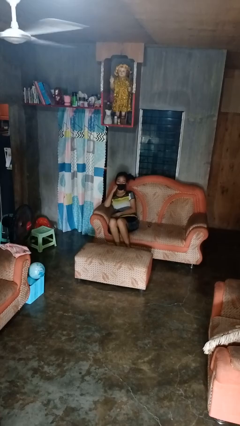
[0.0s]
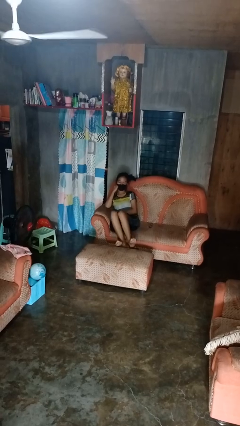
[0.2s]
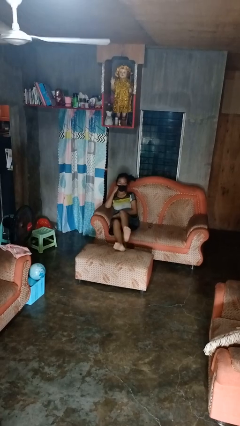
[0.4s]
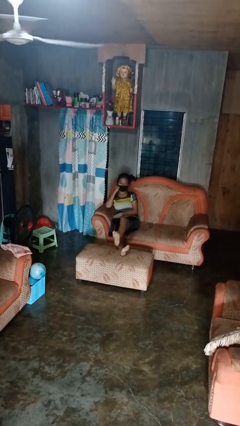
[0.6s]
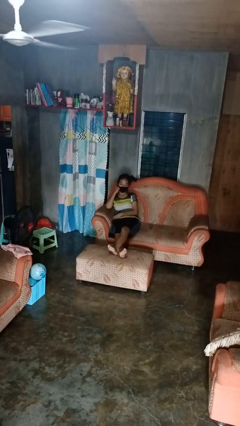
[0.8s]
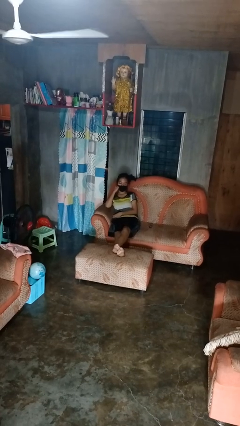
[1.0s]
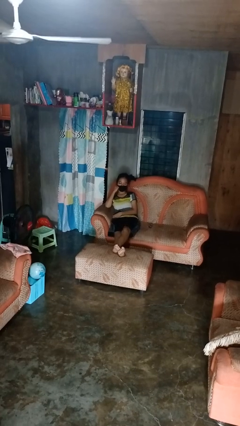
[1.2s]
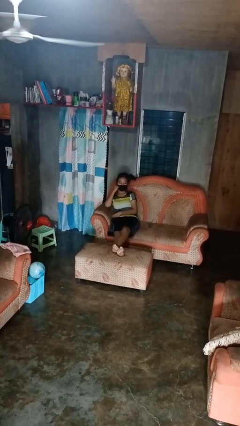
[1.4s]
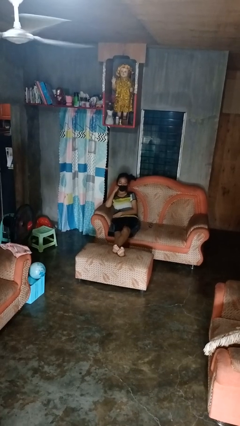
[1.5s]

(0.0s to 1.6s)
person puts feet up

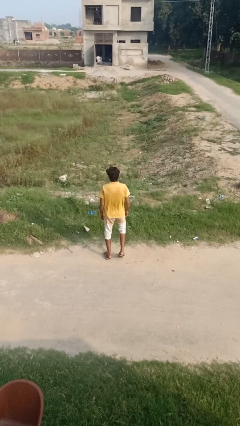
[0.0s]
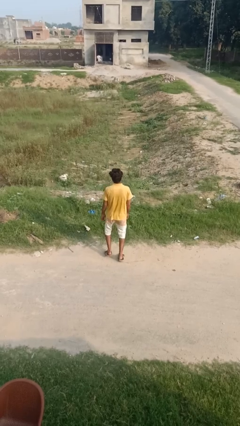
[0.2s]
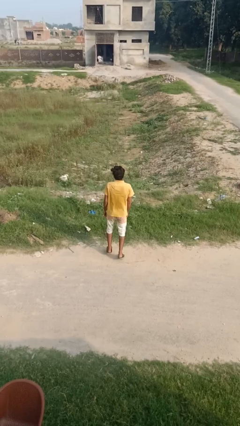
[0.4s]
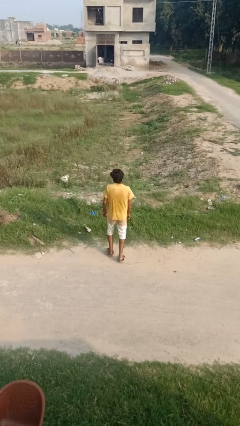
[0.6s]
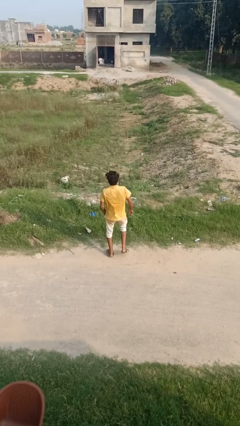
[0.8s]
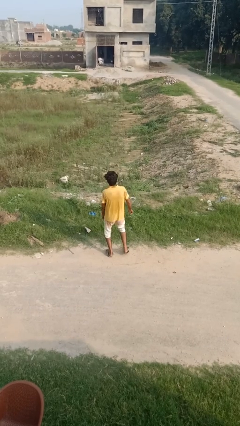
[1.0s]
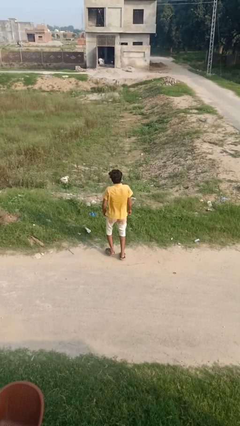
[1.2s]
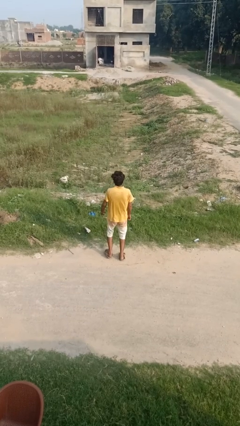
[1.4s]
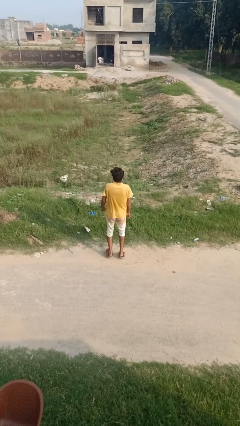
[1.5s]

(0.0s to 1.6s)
person dances in place

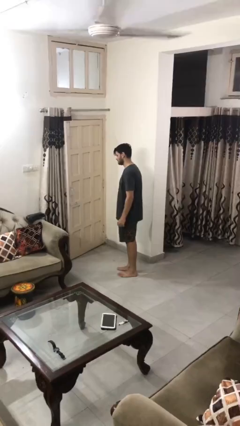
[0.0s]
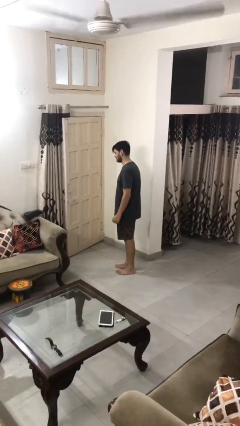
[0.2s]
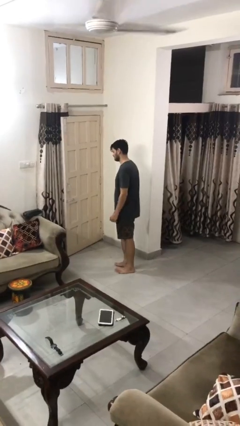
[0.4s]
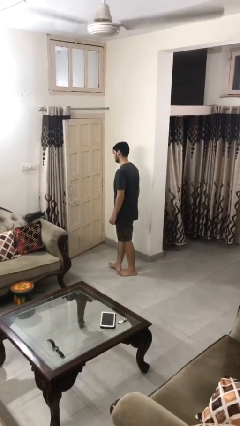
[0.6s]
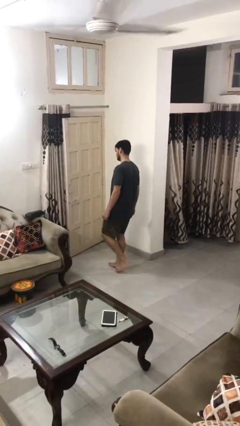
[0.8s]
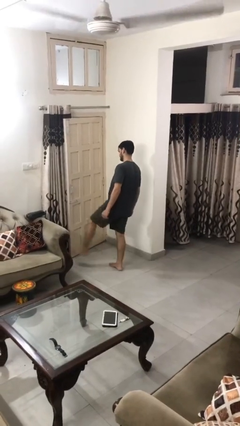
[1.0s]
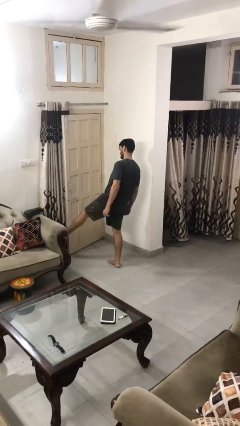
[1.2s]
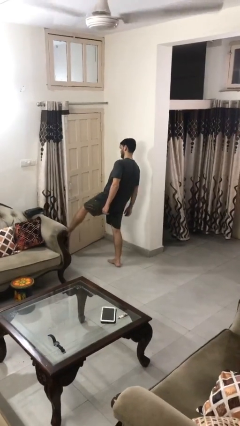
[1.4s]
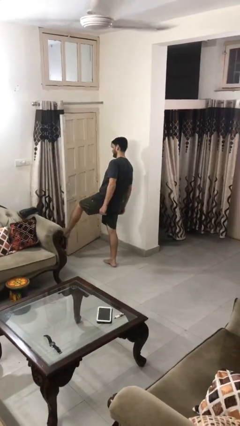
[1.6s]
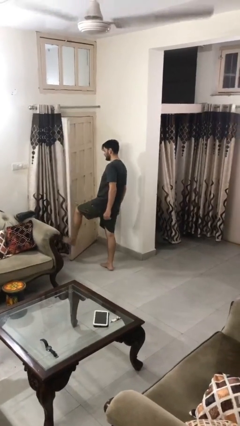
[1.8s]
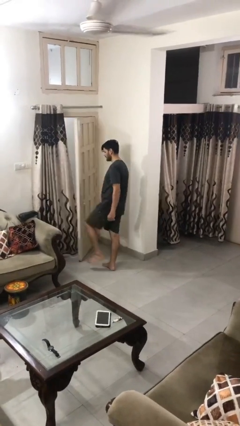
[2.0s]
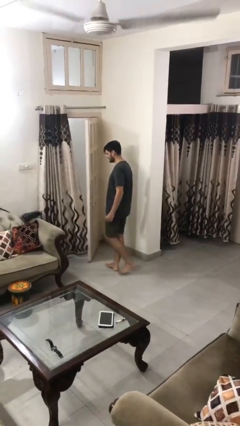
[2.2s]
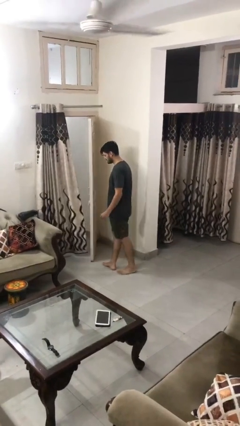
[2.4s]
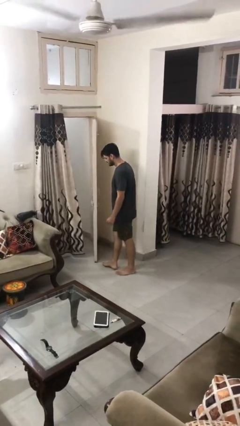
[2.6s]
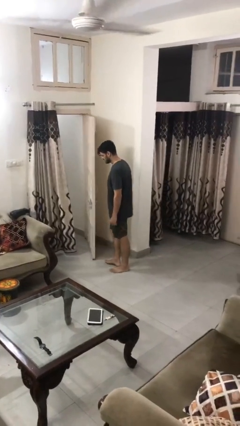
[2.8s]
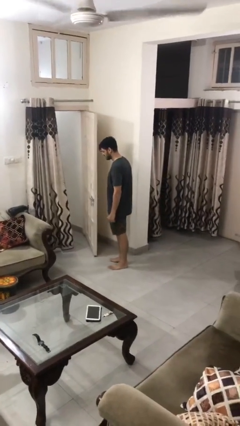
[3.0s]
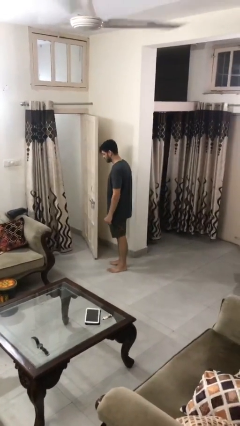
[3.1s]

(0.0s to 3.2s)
person opens facility door

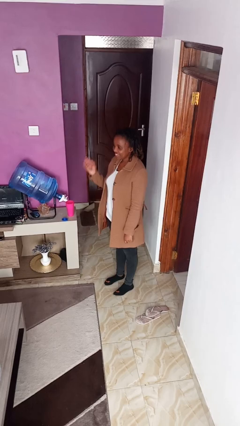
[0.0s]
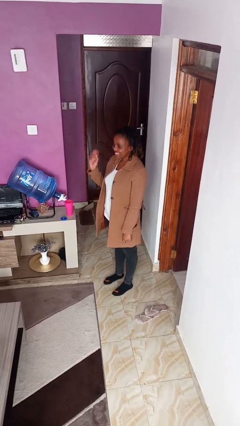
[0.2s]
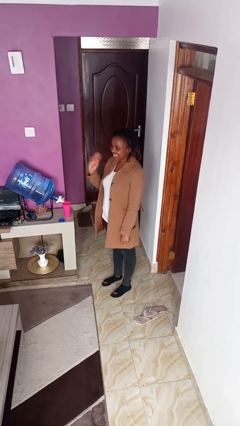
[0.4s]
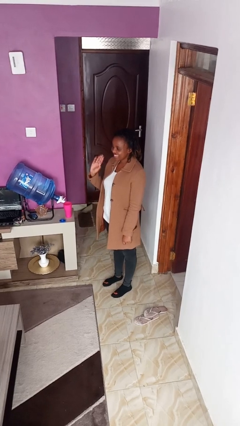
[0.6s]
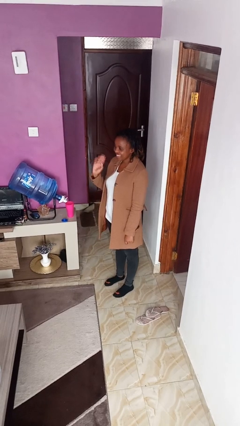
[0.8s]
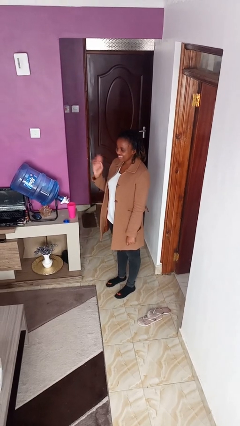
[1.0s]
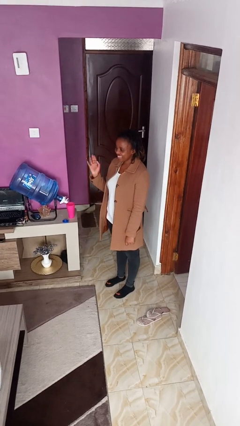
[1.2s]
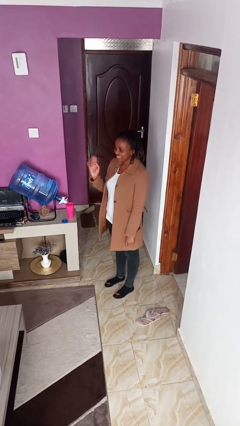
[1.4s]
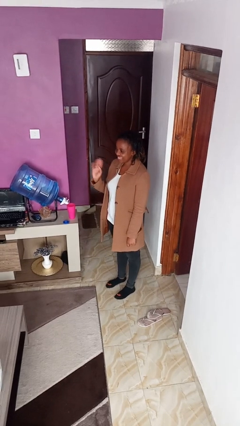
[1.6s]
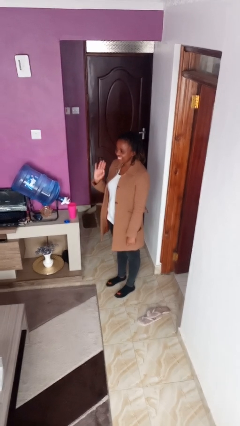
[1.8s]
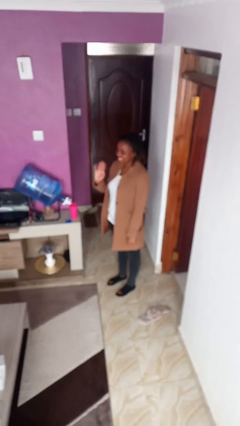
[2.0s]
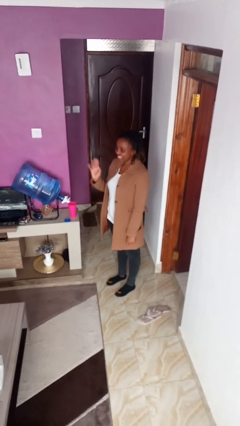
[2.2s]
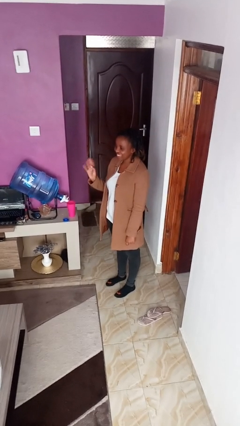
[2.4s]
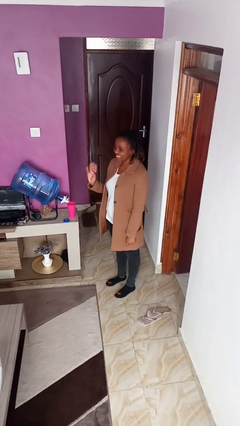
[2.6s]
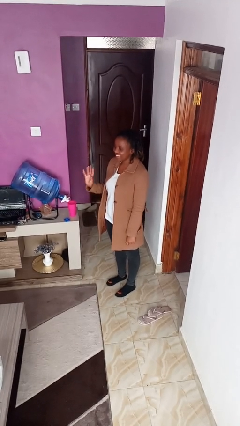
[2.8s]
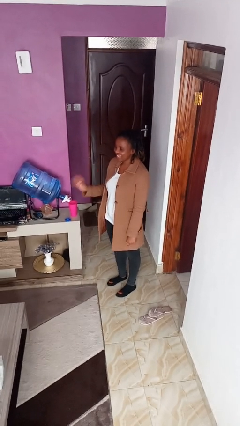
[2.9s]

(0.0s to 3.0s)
person waves at person

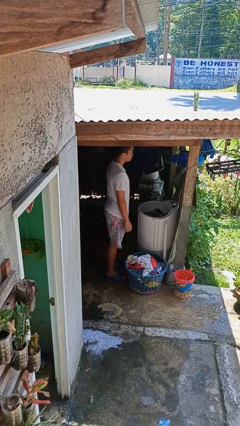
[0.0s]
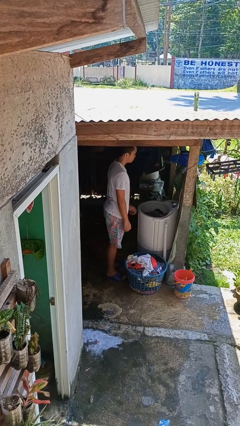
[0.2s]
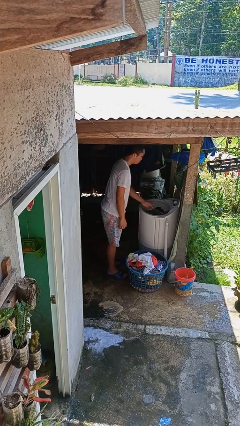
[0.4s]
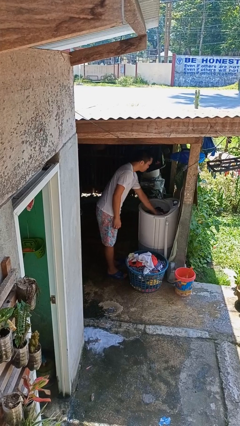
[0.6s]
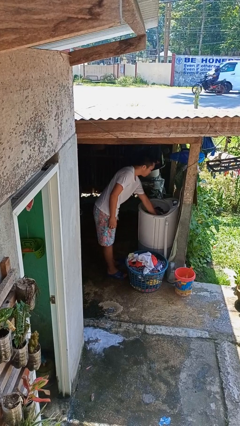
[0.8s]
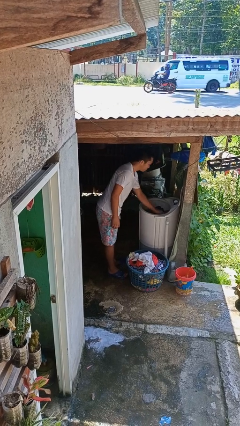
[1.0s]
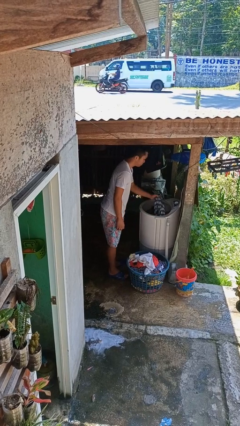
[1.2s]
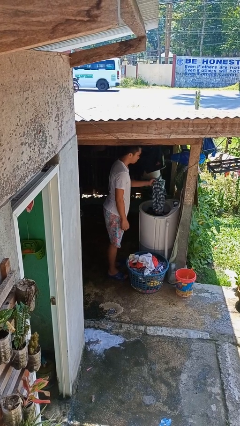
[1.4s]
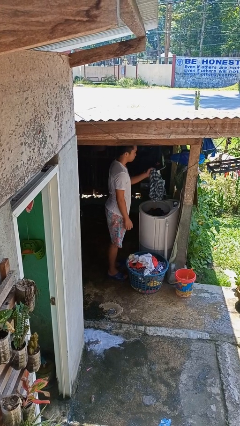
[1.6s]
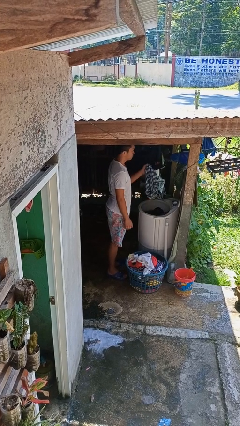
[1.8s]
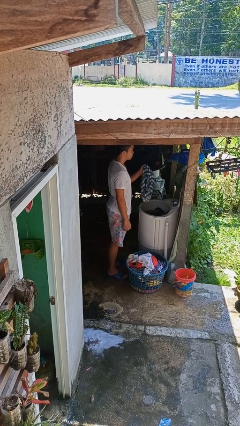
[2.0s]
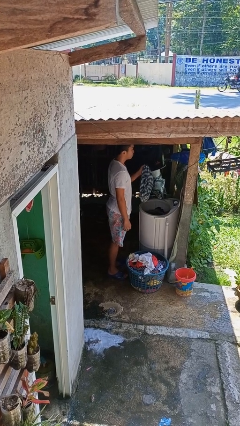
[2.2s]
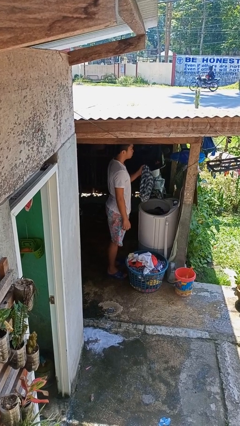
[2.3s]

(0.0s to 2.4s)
person unloads clotheswasher

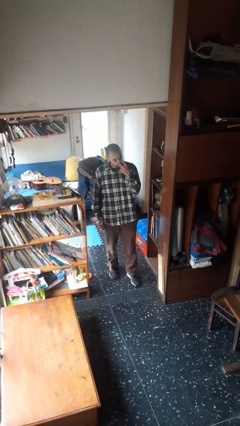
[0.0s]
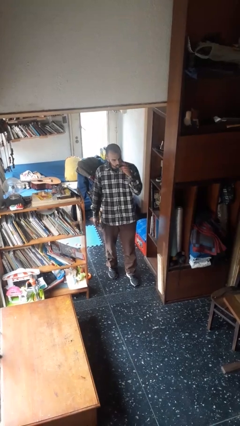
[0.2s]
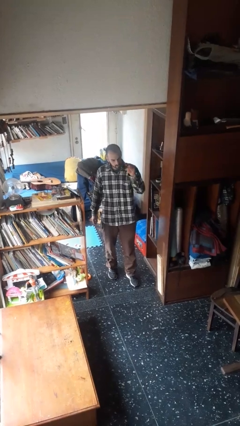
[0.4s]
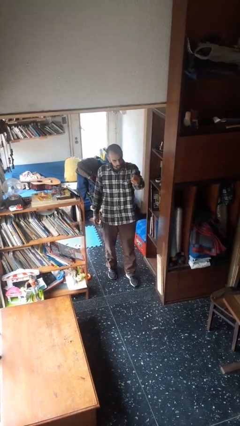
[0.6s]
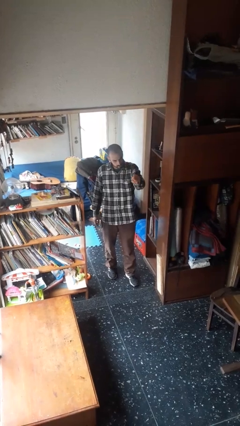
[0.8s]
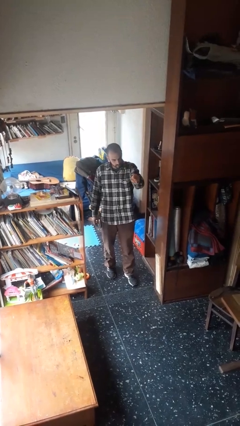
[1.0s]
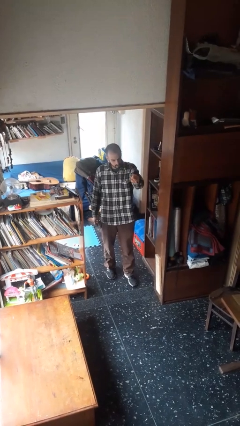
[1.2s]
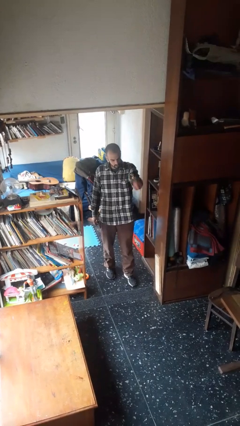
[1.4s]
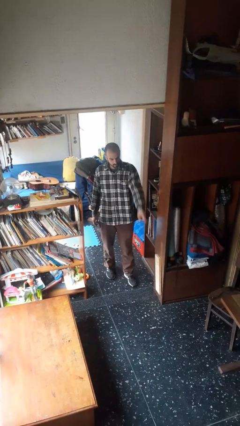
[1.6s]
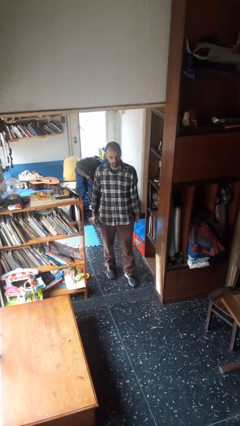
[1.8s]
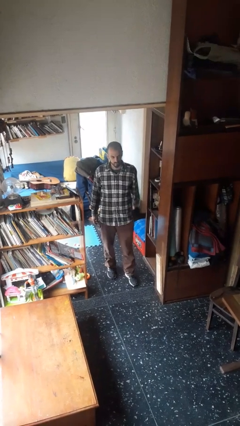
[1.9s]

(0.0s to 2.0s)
person gestures watch closely

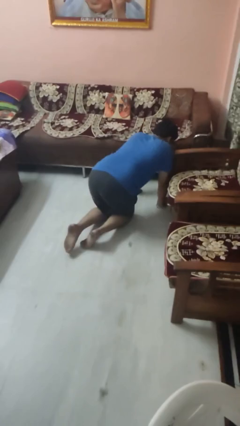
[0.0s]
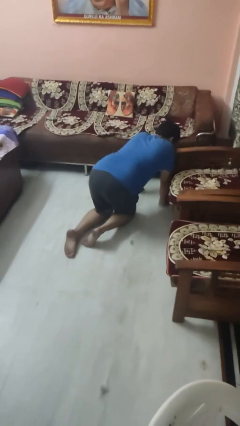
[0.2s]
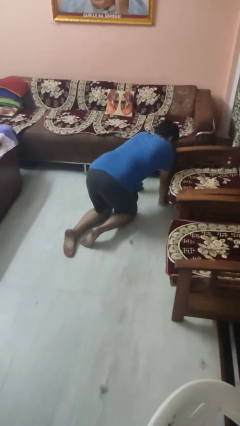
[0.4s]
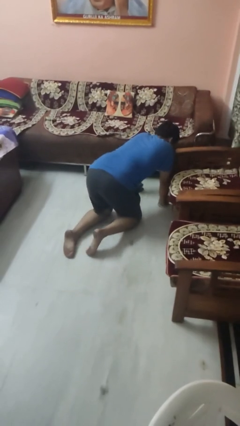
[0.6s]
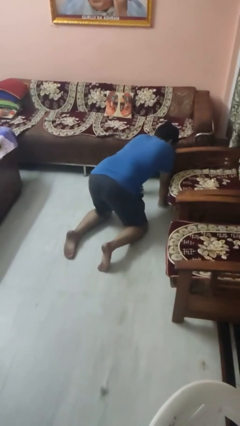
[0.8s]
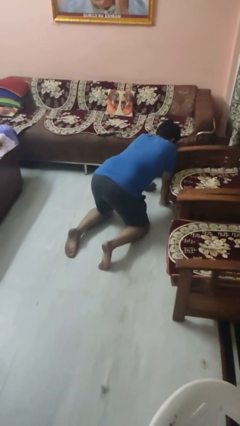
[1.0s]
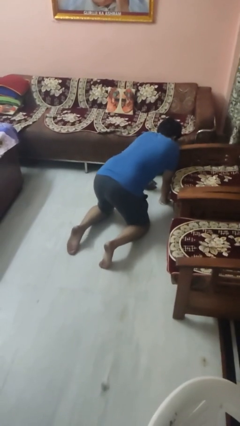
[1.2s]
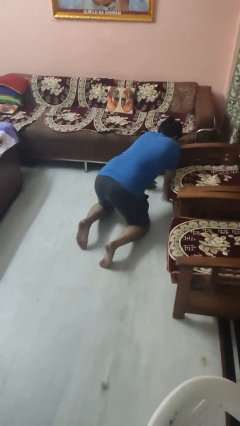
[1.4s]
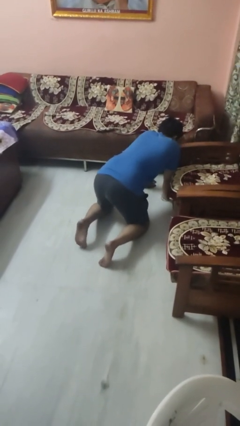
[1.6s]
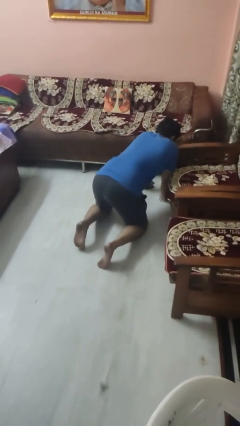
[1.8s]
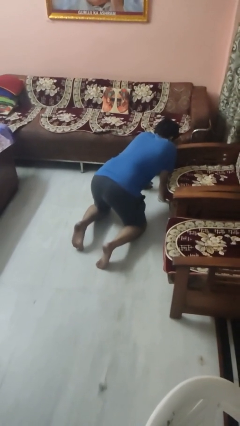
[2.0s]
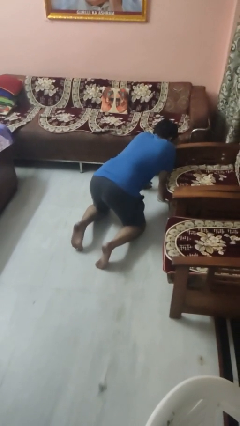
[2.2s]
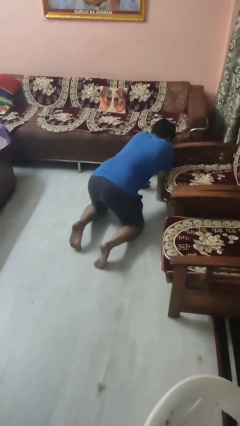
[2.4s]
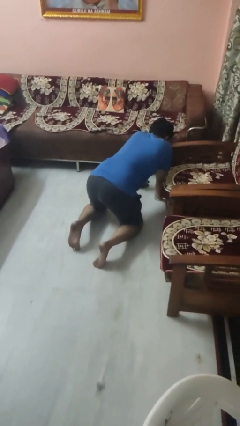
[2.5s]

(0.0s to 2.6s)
person crawls

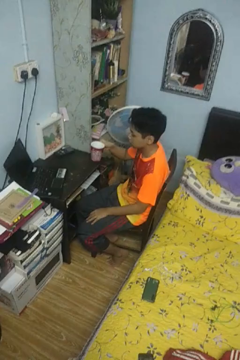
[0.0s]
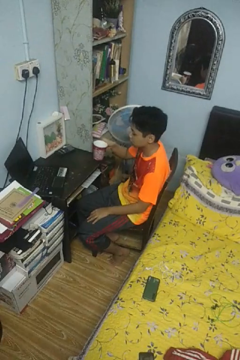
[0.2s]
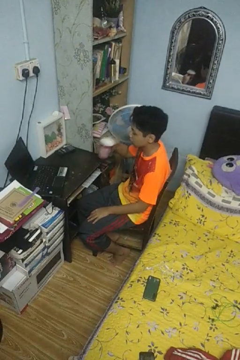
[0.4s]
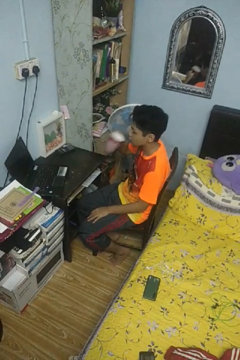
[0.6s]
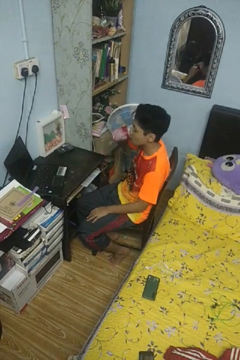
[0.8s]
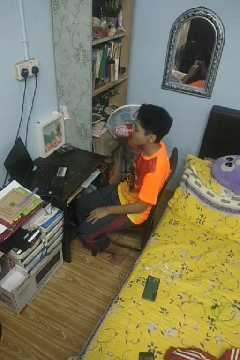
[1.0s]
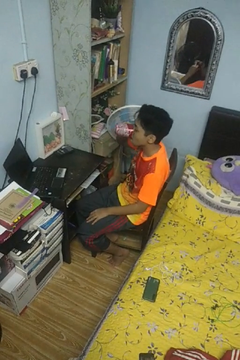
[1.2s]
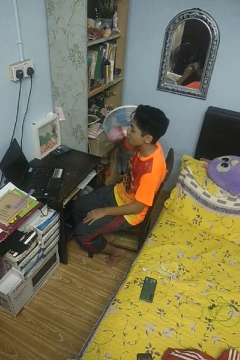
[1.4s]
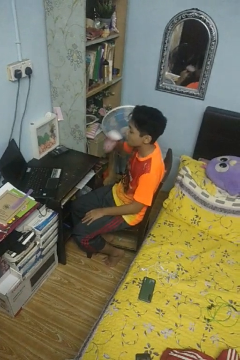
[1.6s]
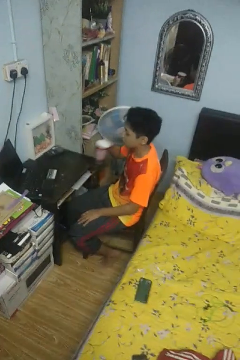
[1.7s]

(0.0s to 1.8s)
person opens refrigerator
